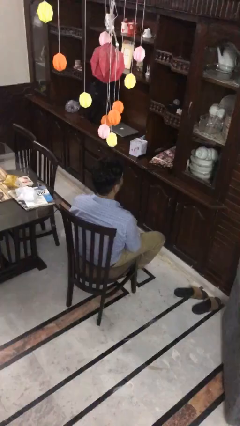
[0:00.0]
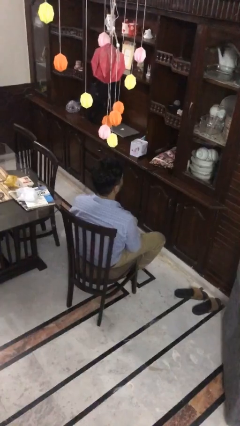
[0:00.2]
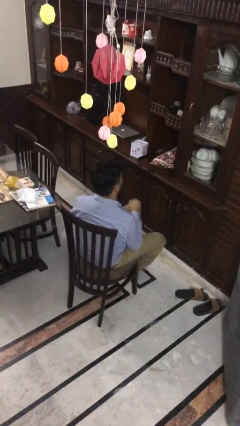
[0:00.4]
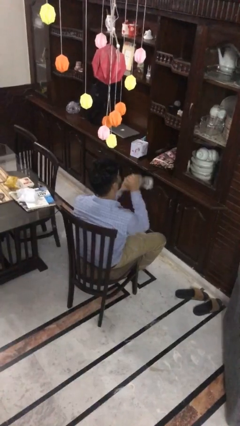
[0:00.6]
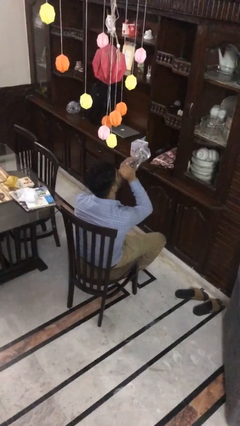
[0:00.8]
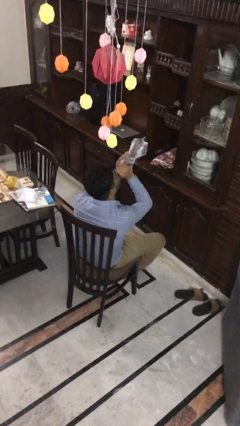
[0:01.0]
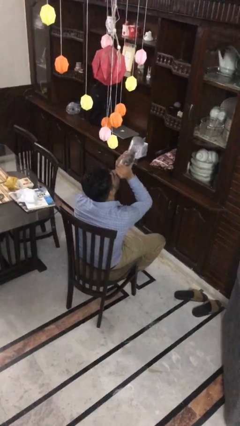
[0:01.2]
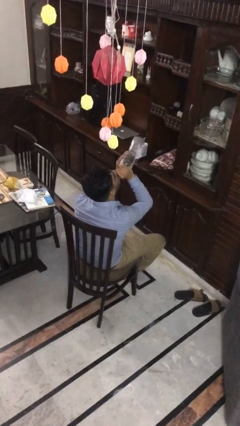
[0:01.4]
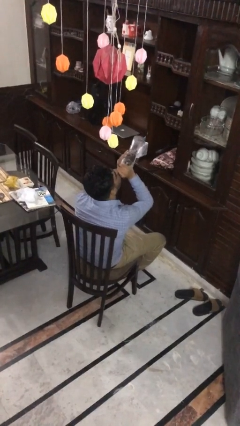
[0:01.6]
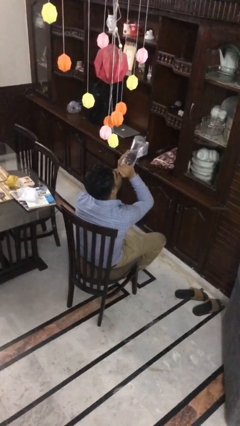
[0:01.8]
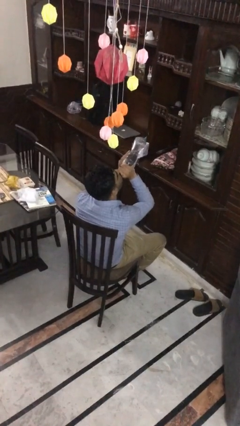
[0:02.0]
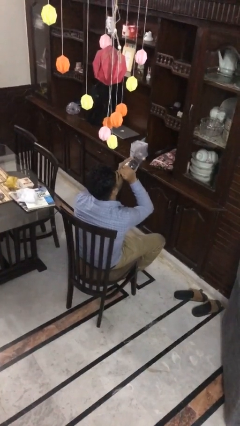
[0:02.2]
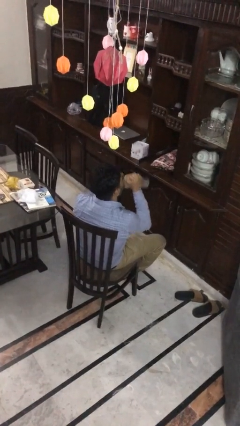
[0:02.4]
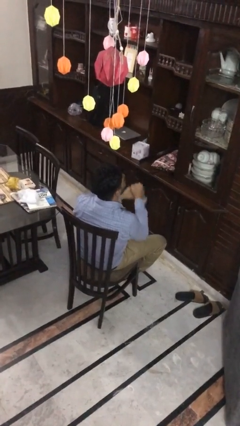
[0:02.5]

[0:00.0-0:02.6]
person drinks from bottle

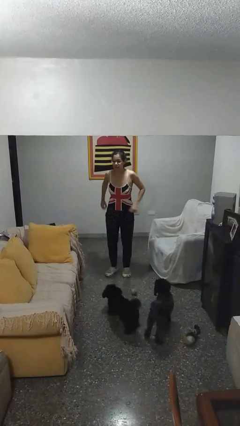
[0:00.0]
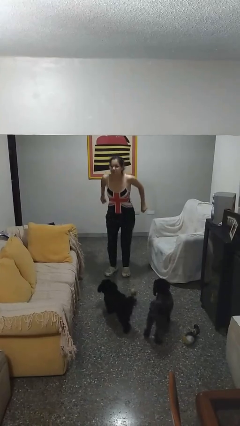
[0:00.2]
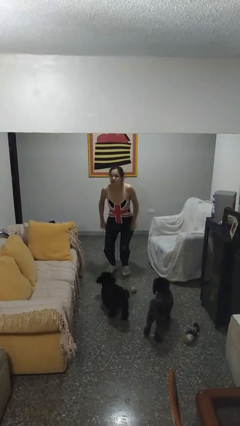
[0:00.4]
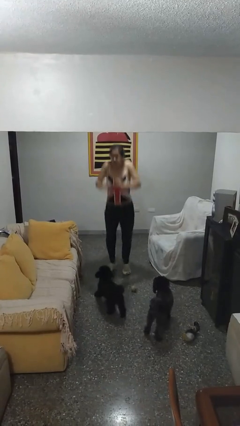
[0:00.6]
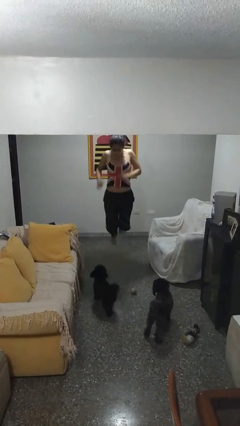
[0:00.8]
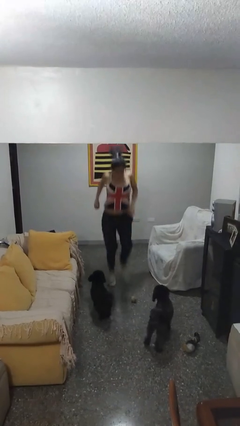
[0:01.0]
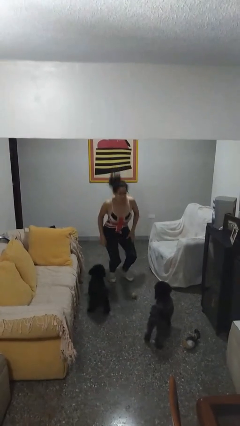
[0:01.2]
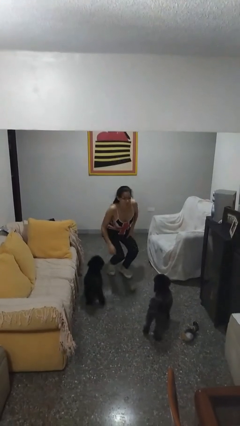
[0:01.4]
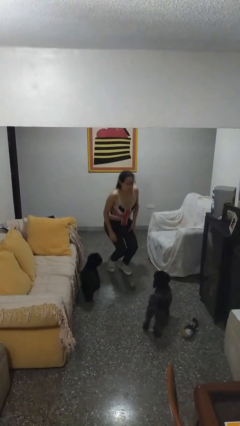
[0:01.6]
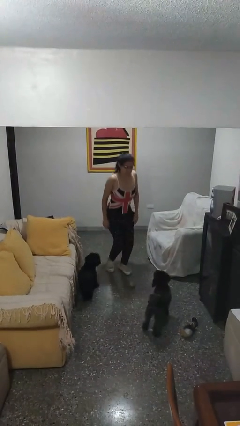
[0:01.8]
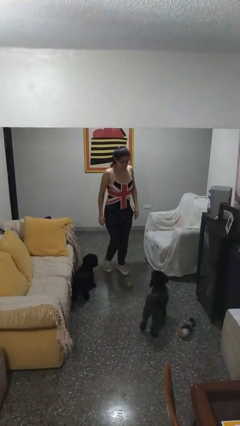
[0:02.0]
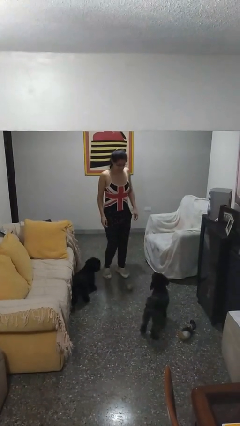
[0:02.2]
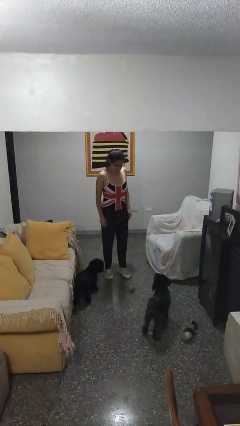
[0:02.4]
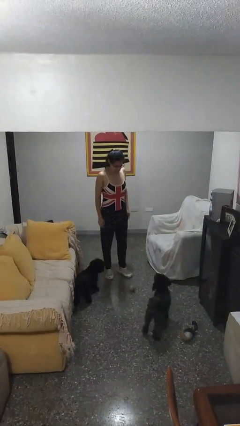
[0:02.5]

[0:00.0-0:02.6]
person jumps

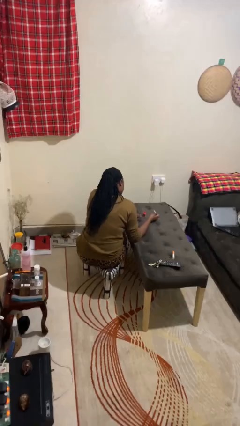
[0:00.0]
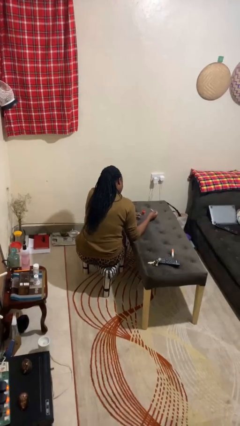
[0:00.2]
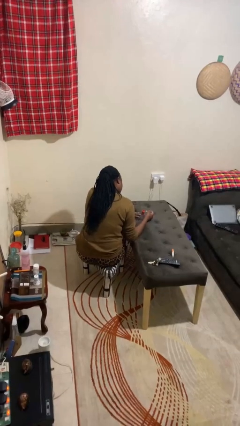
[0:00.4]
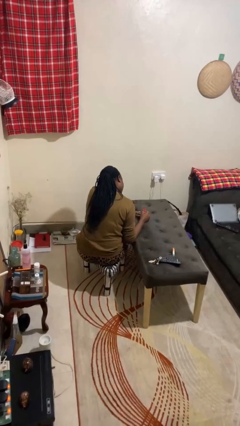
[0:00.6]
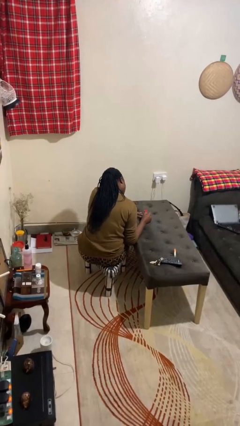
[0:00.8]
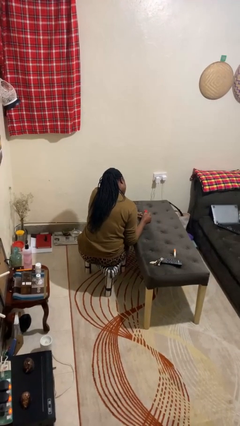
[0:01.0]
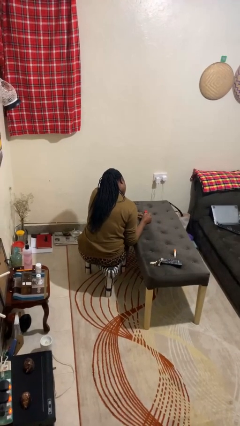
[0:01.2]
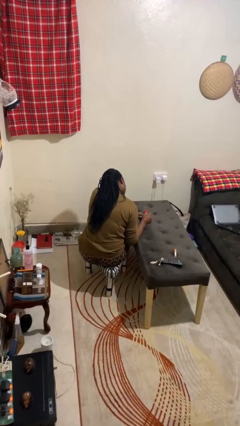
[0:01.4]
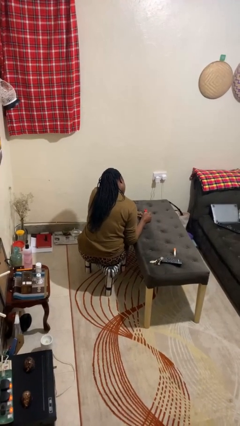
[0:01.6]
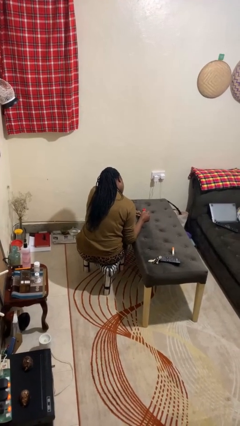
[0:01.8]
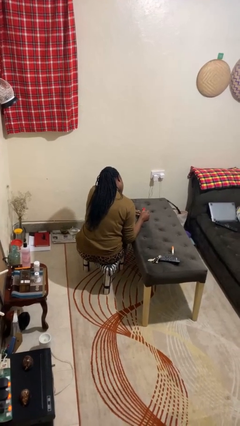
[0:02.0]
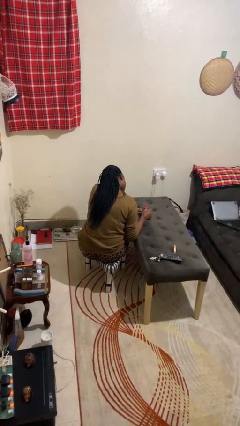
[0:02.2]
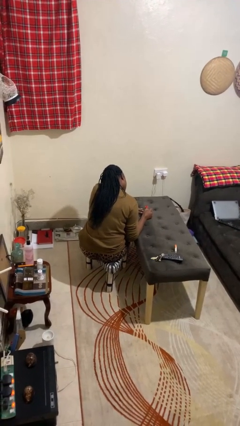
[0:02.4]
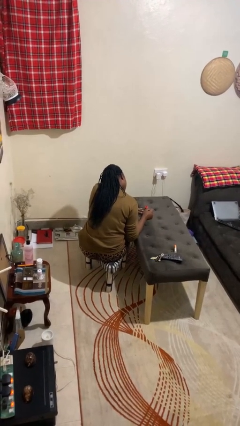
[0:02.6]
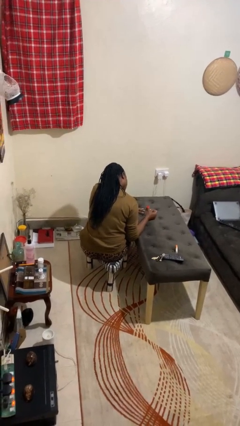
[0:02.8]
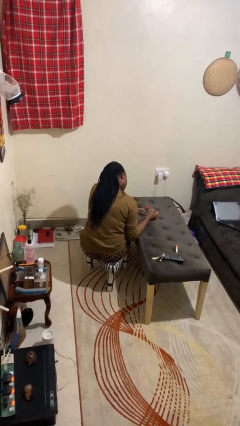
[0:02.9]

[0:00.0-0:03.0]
person paints fingernails

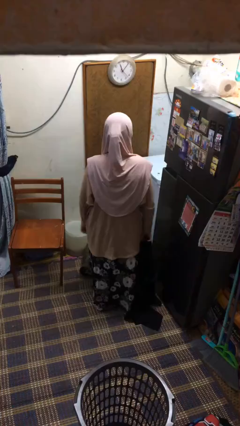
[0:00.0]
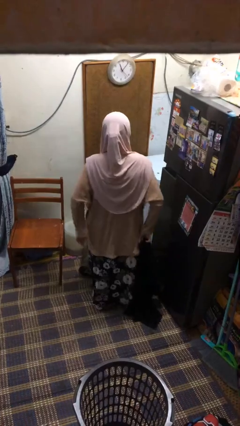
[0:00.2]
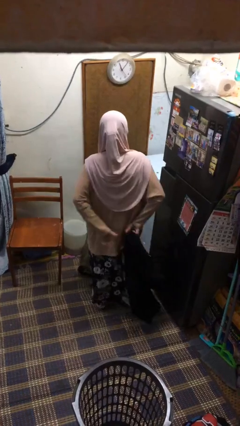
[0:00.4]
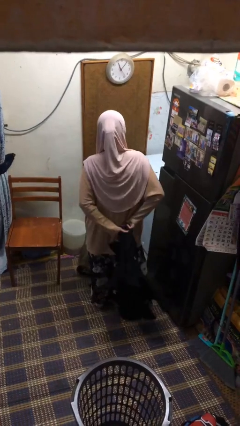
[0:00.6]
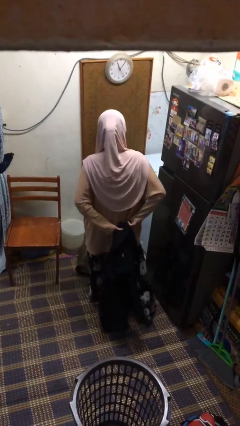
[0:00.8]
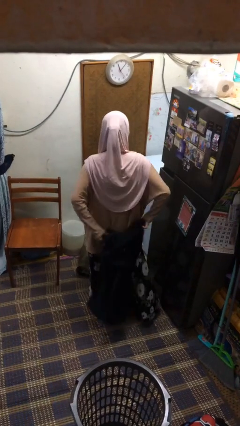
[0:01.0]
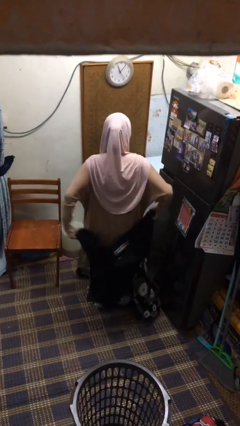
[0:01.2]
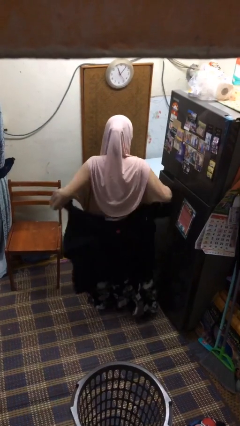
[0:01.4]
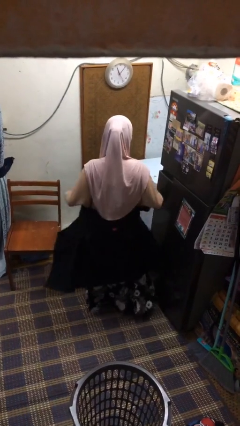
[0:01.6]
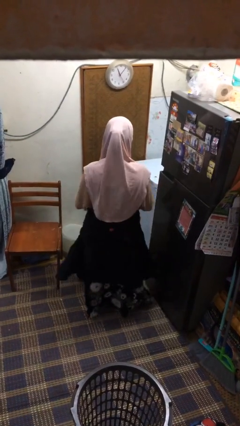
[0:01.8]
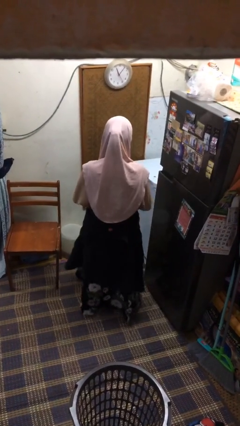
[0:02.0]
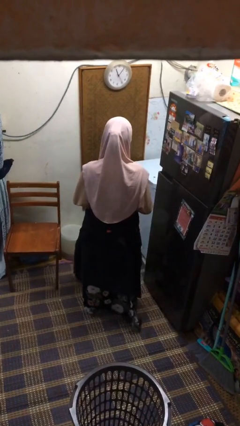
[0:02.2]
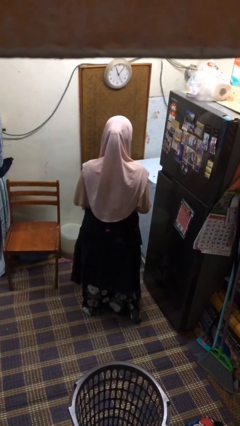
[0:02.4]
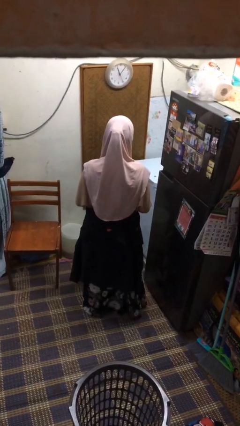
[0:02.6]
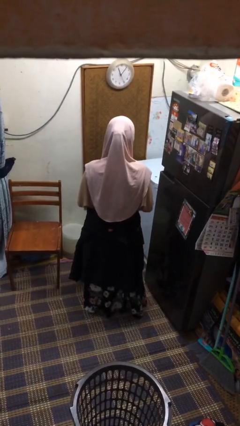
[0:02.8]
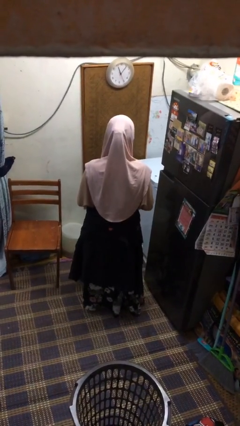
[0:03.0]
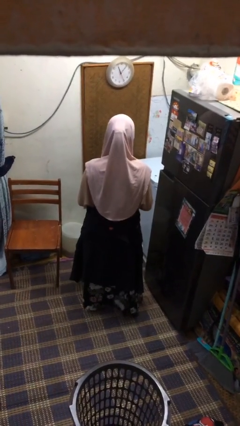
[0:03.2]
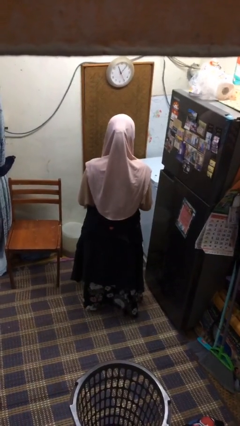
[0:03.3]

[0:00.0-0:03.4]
person ties jacket around waist

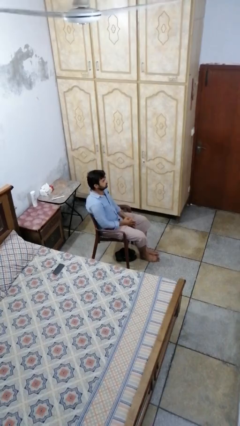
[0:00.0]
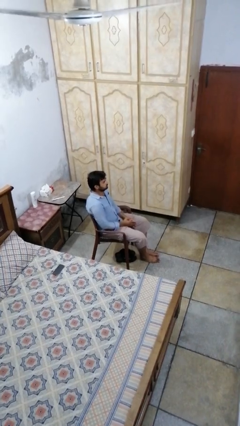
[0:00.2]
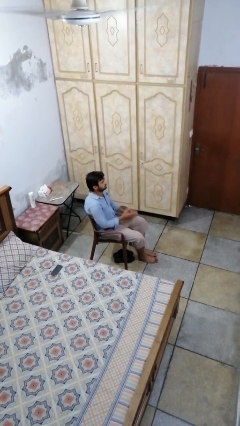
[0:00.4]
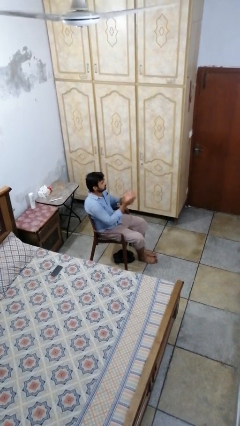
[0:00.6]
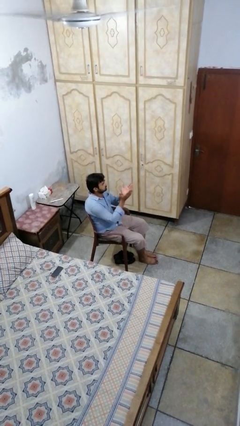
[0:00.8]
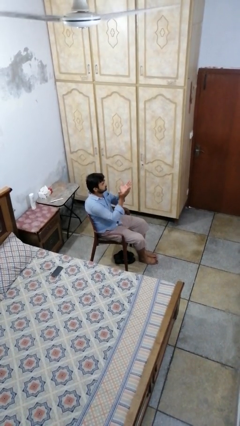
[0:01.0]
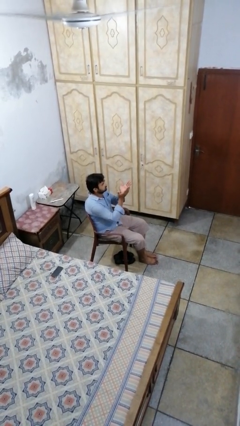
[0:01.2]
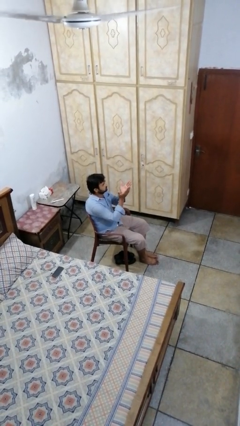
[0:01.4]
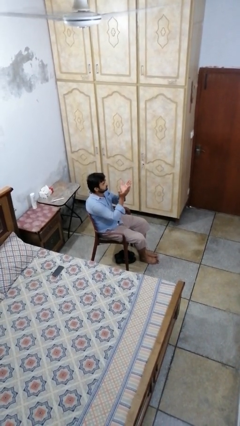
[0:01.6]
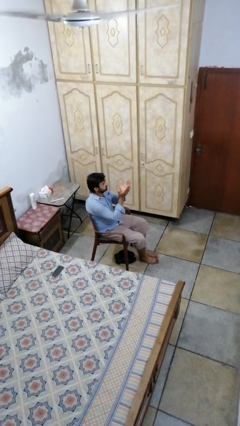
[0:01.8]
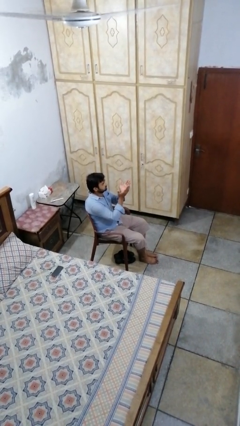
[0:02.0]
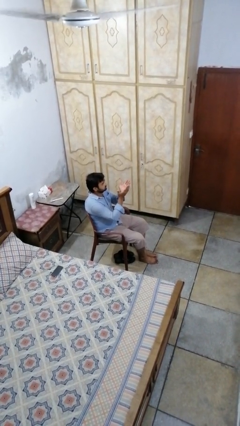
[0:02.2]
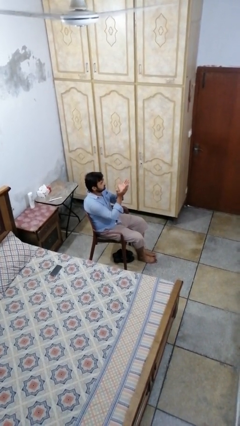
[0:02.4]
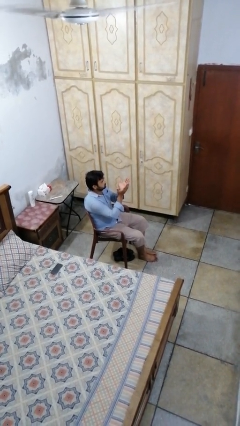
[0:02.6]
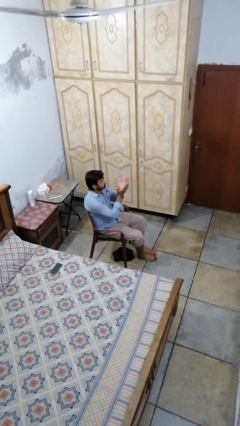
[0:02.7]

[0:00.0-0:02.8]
person prays

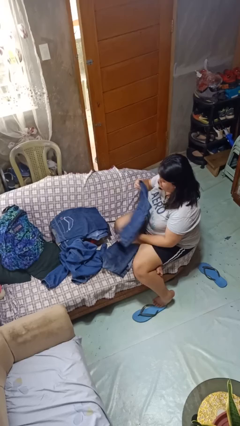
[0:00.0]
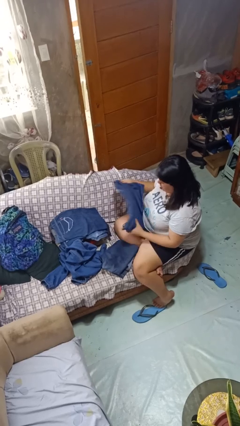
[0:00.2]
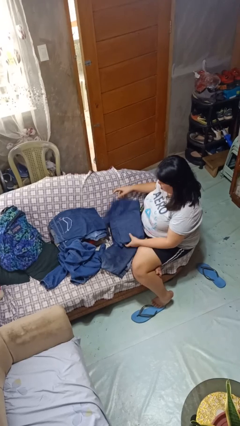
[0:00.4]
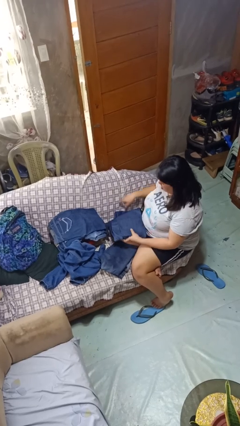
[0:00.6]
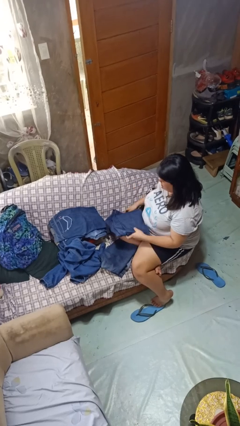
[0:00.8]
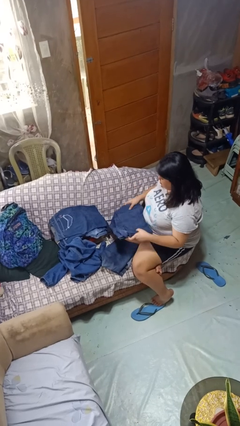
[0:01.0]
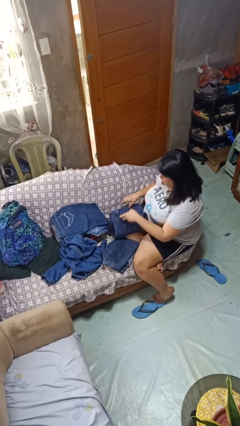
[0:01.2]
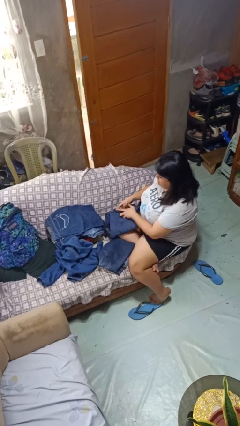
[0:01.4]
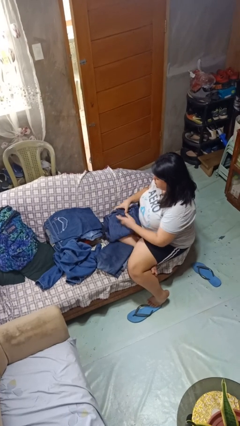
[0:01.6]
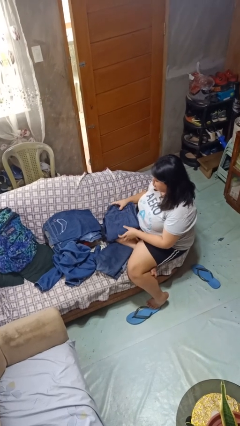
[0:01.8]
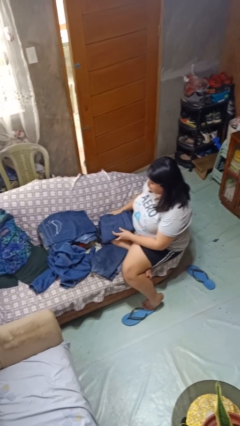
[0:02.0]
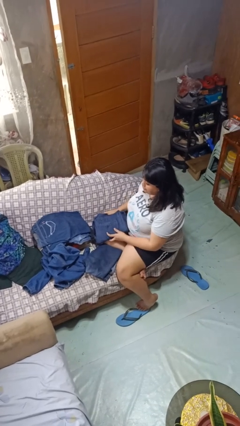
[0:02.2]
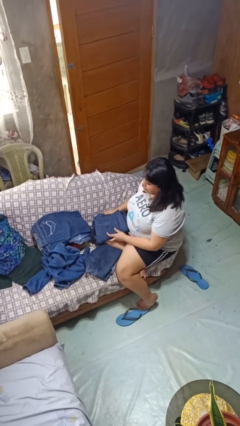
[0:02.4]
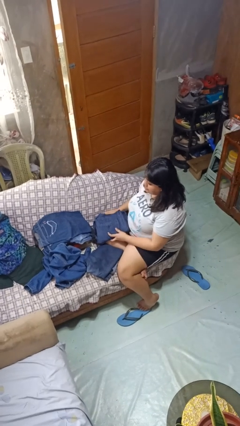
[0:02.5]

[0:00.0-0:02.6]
person folds pants

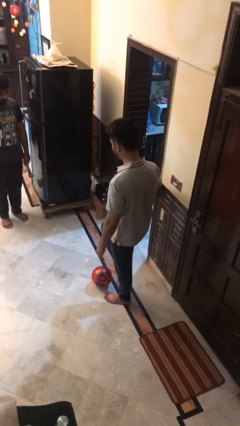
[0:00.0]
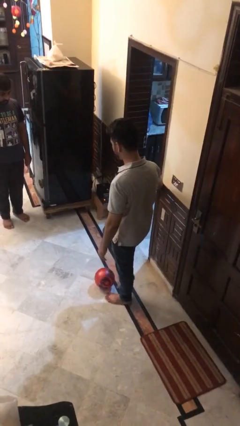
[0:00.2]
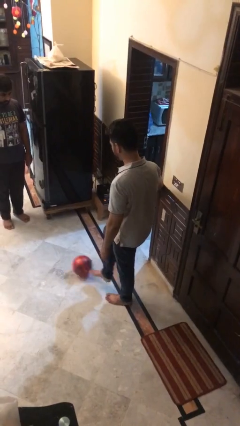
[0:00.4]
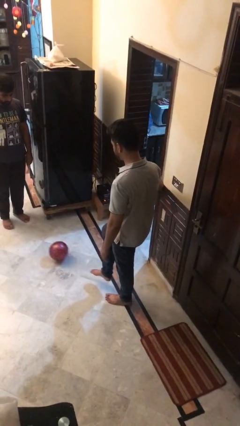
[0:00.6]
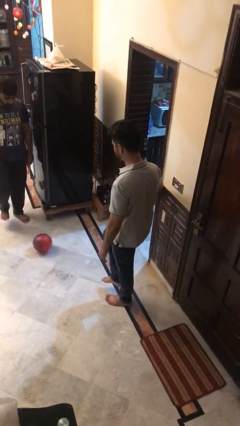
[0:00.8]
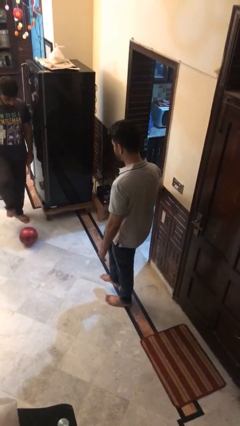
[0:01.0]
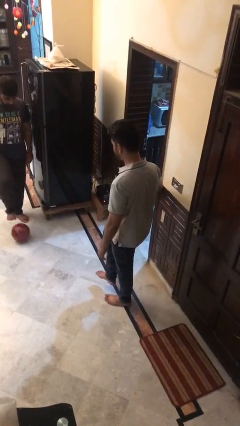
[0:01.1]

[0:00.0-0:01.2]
person kicks object to person
